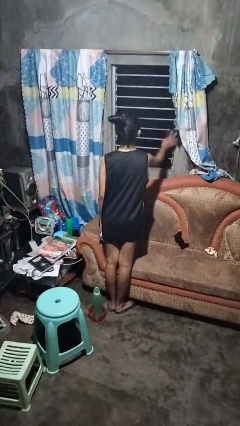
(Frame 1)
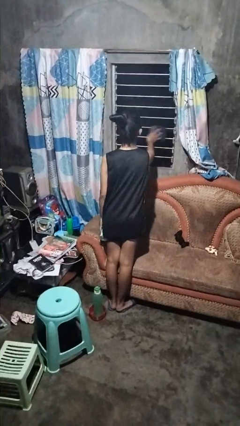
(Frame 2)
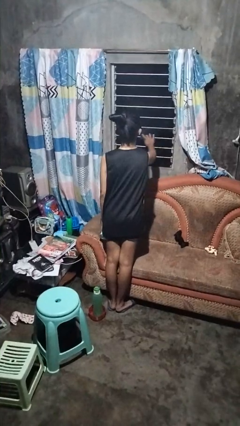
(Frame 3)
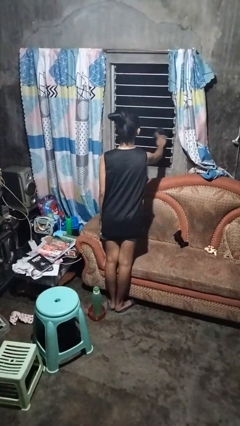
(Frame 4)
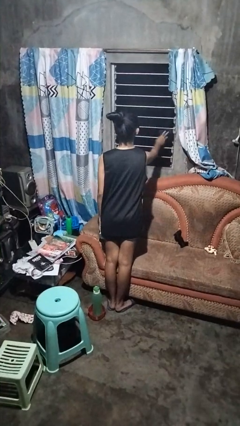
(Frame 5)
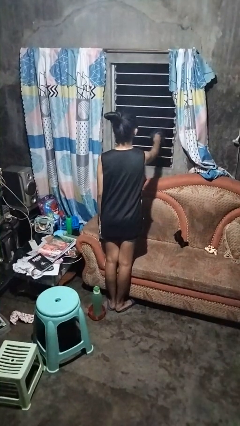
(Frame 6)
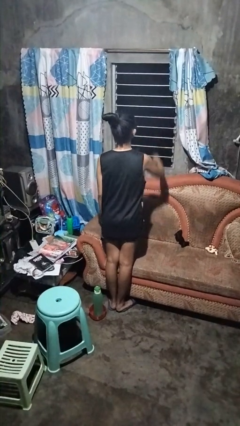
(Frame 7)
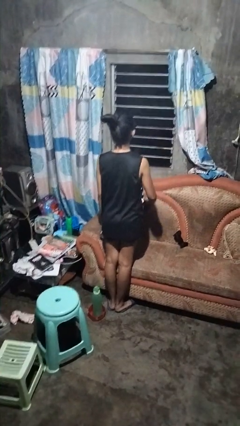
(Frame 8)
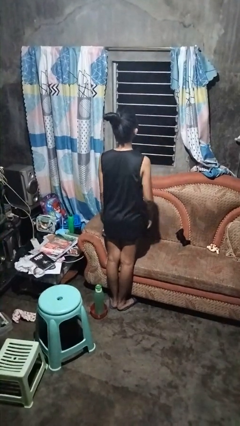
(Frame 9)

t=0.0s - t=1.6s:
person washes window

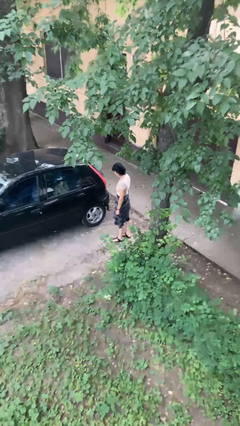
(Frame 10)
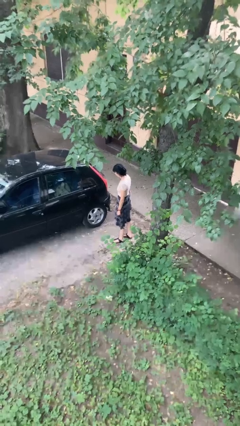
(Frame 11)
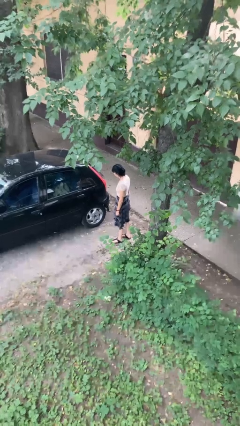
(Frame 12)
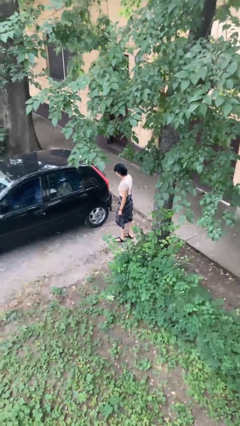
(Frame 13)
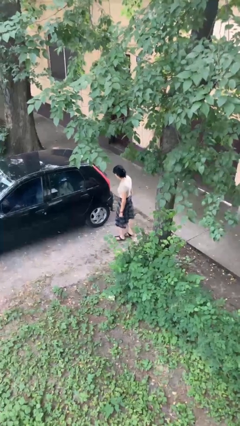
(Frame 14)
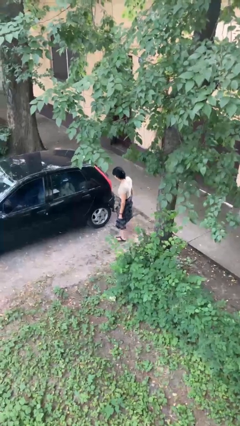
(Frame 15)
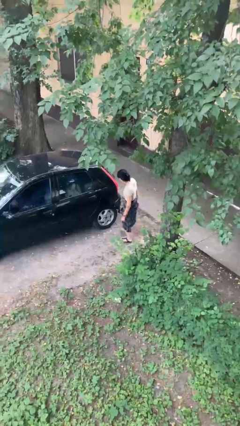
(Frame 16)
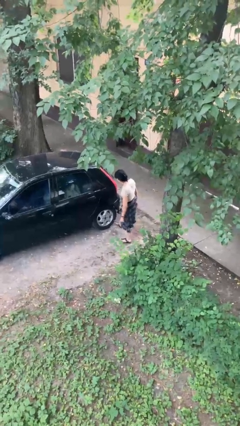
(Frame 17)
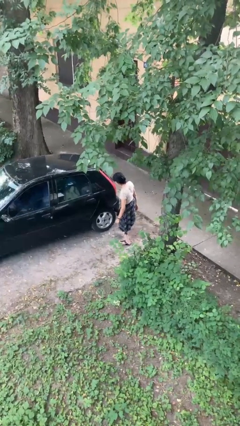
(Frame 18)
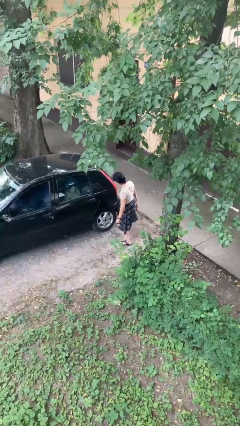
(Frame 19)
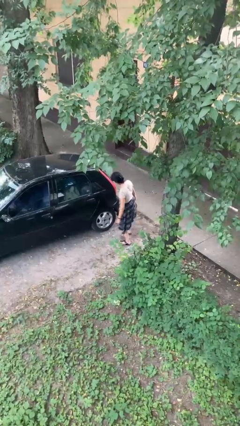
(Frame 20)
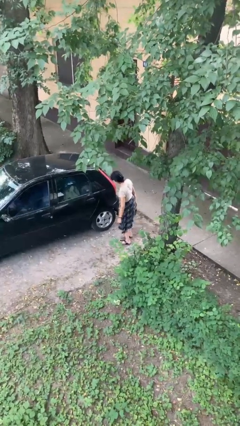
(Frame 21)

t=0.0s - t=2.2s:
person kicks car tires

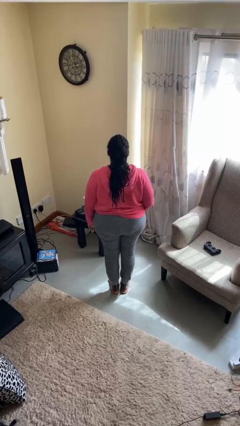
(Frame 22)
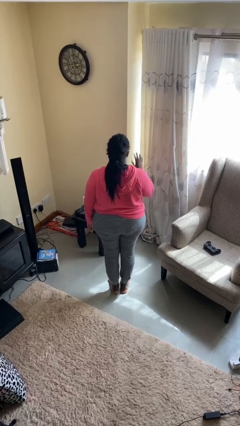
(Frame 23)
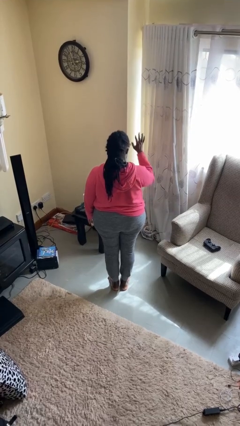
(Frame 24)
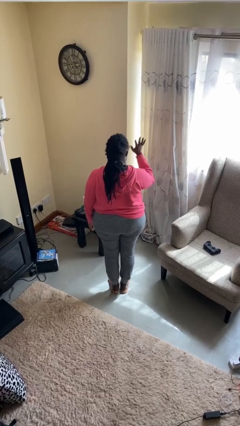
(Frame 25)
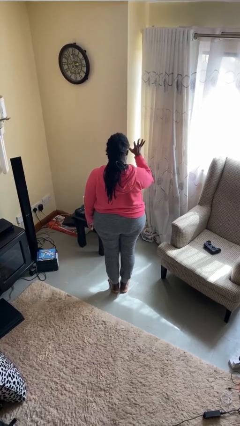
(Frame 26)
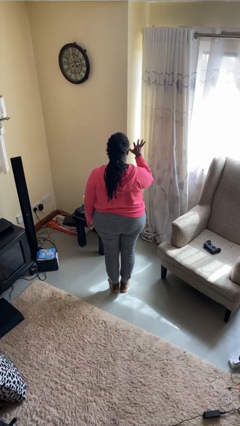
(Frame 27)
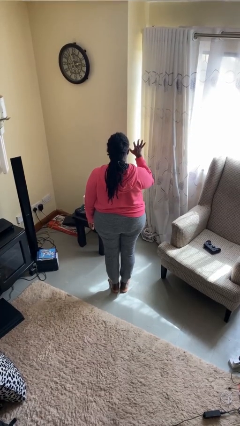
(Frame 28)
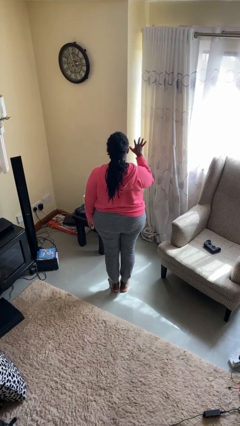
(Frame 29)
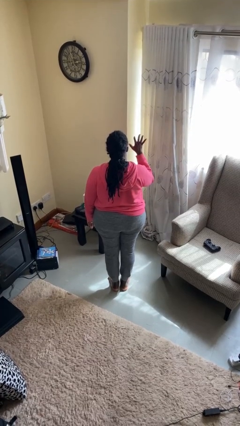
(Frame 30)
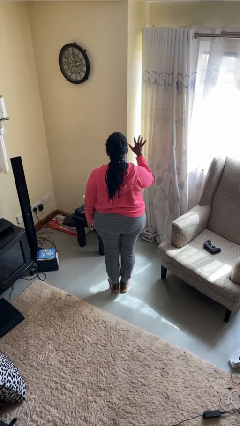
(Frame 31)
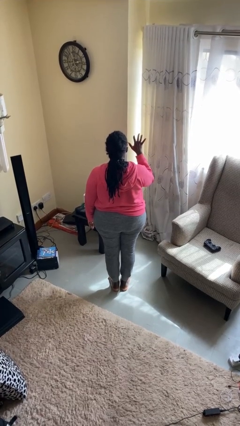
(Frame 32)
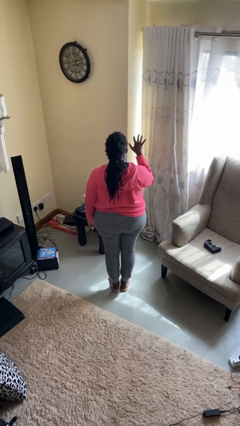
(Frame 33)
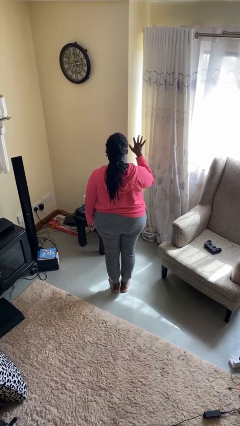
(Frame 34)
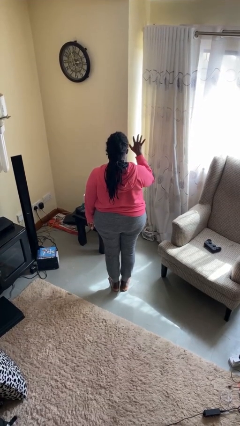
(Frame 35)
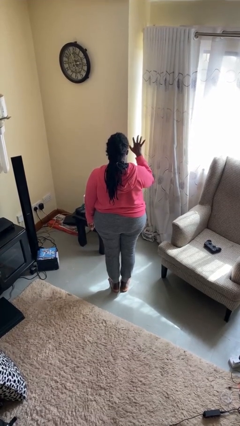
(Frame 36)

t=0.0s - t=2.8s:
person gestures number five

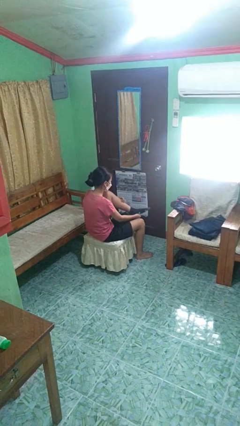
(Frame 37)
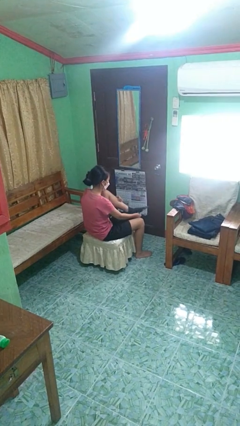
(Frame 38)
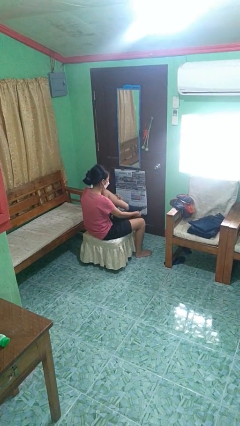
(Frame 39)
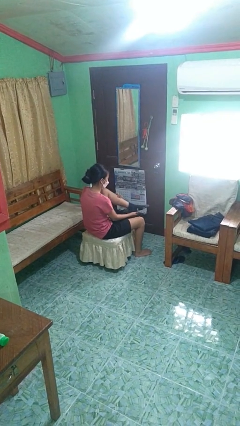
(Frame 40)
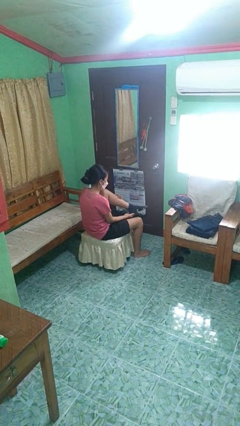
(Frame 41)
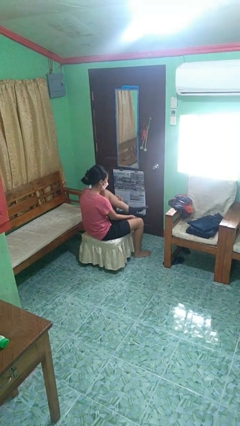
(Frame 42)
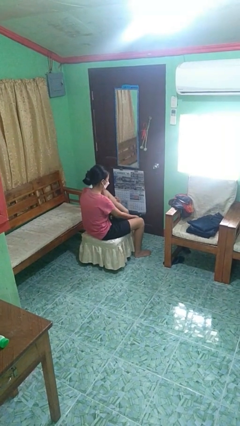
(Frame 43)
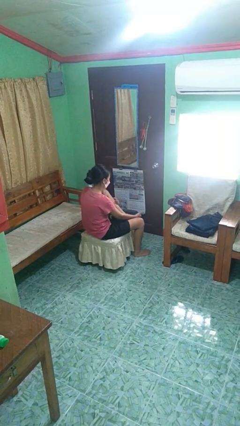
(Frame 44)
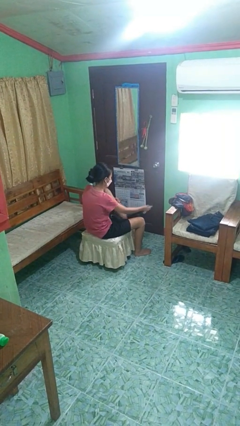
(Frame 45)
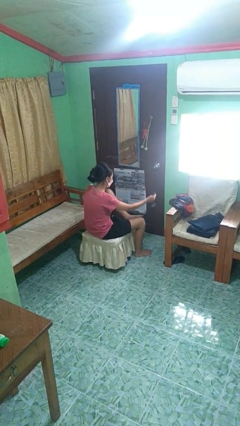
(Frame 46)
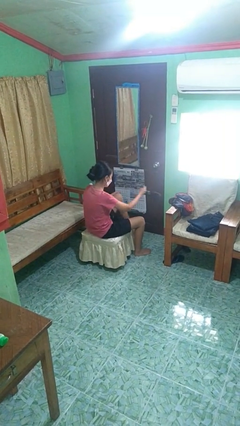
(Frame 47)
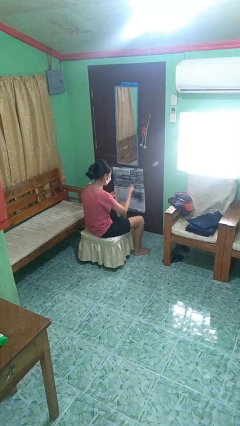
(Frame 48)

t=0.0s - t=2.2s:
person takes off socks

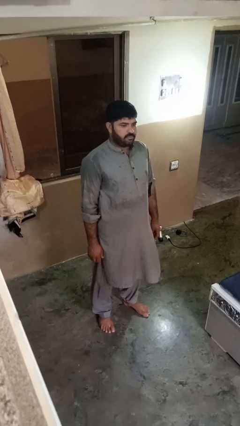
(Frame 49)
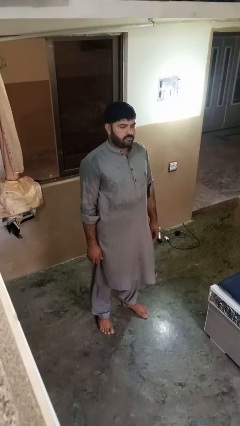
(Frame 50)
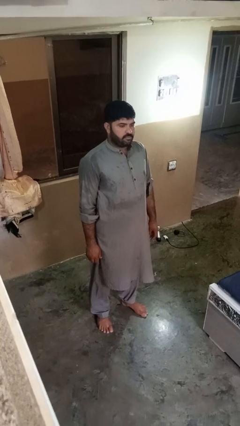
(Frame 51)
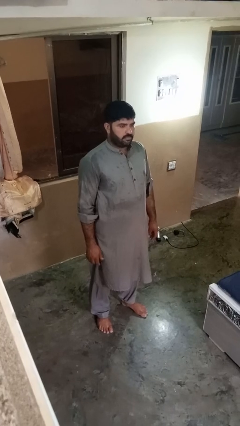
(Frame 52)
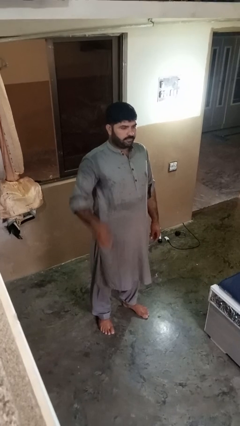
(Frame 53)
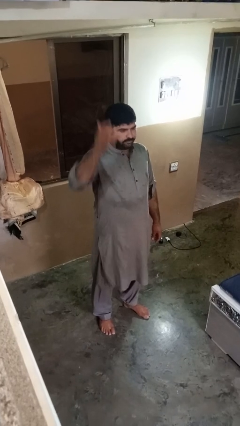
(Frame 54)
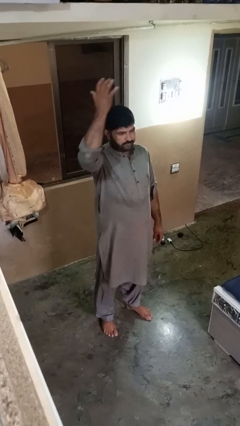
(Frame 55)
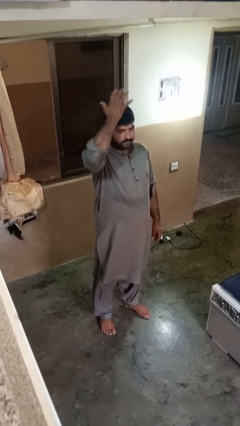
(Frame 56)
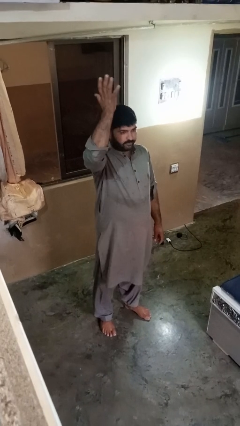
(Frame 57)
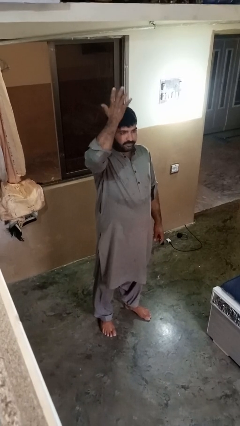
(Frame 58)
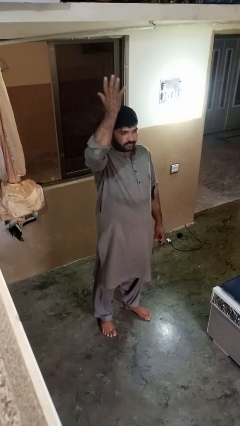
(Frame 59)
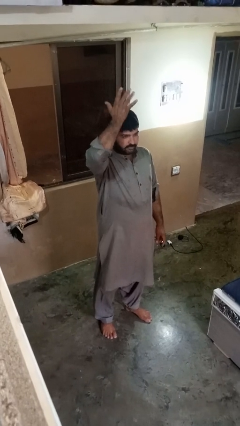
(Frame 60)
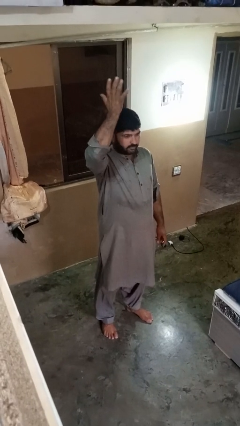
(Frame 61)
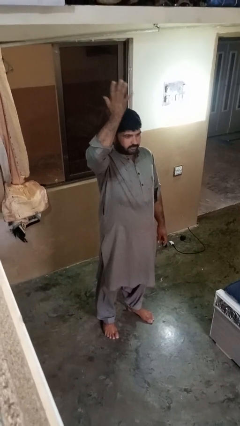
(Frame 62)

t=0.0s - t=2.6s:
person pats head

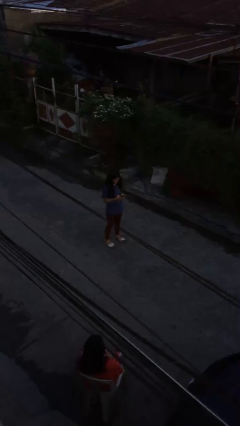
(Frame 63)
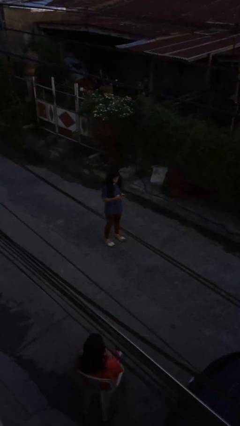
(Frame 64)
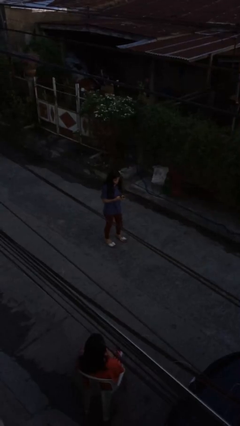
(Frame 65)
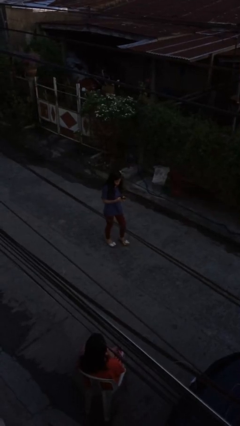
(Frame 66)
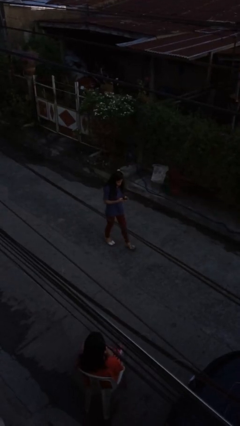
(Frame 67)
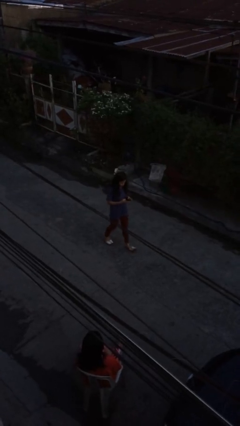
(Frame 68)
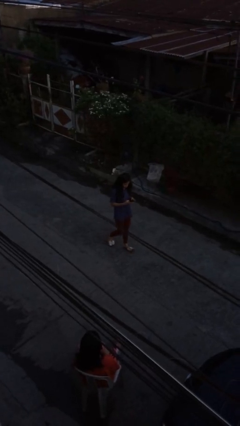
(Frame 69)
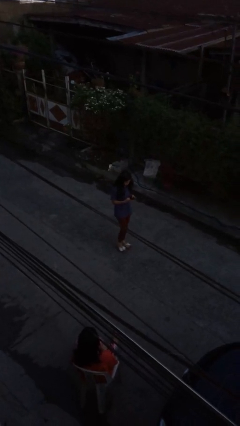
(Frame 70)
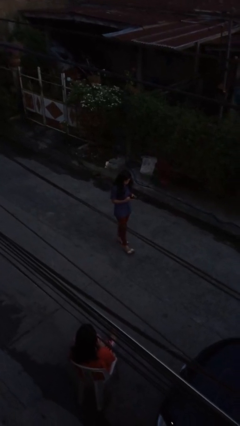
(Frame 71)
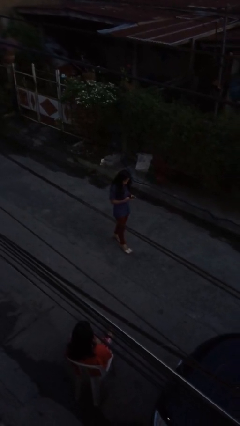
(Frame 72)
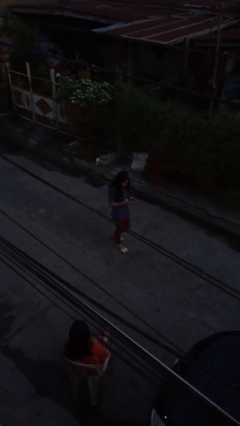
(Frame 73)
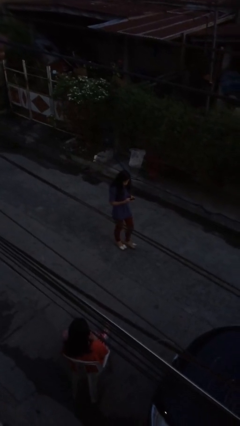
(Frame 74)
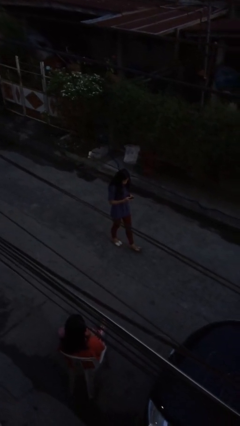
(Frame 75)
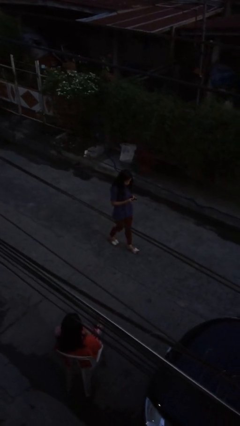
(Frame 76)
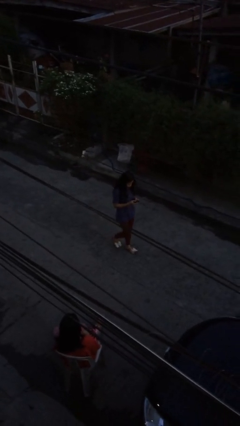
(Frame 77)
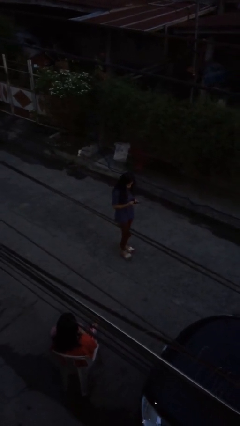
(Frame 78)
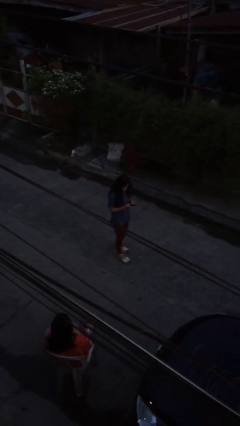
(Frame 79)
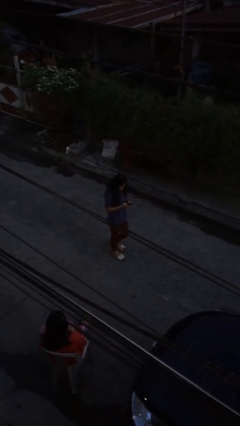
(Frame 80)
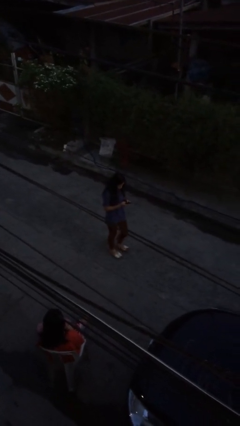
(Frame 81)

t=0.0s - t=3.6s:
person texts on phone

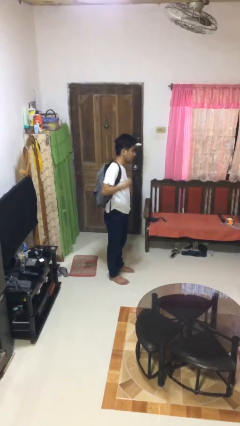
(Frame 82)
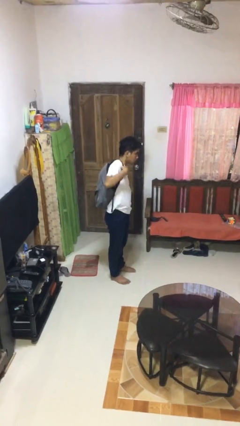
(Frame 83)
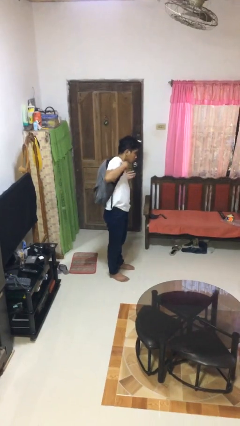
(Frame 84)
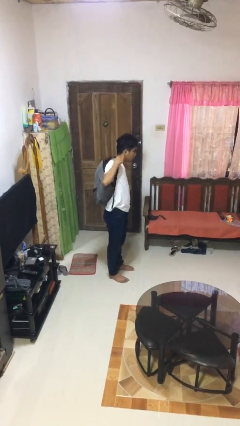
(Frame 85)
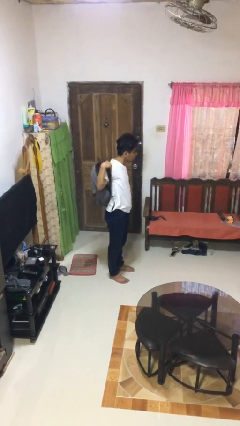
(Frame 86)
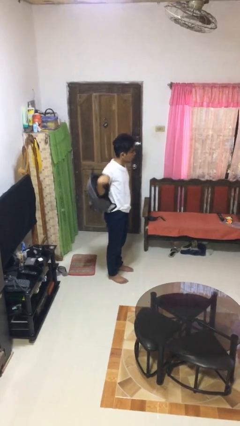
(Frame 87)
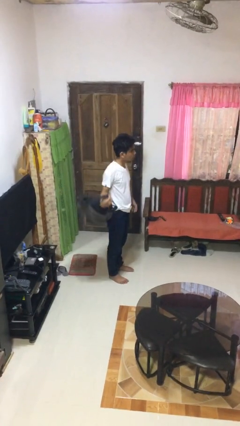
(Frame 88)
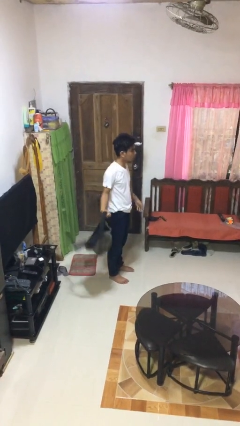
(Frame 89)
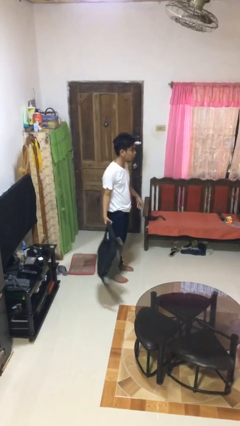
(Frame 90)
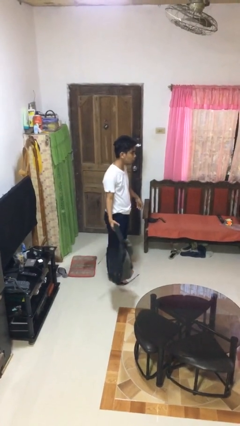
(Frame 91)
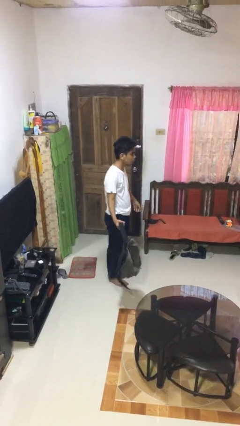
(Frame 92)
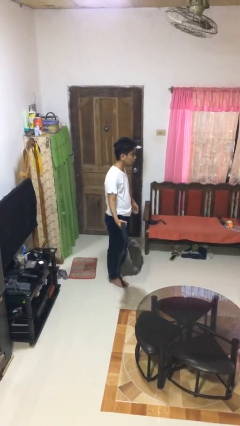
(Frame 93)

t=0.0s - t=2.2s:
person takes off backpack
